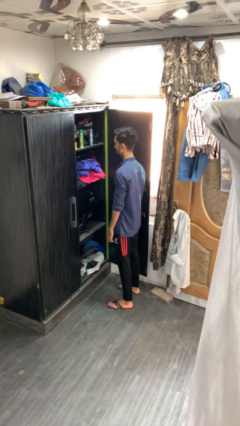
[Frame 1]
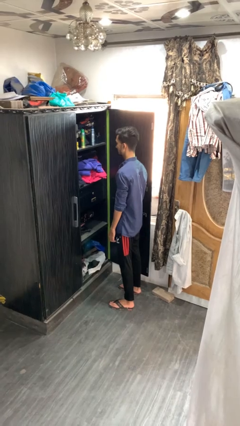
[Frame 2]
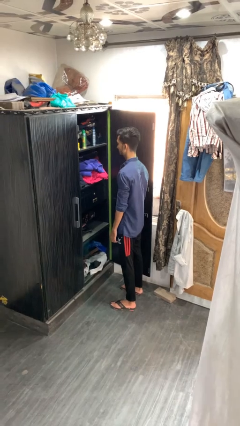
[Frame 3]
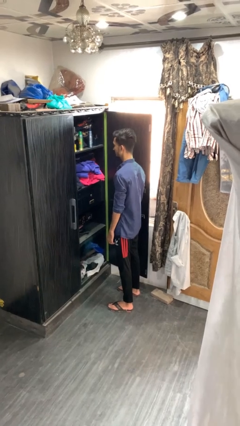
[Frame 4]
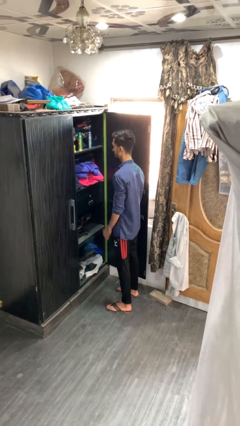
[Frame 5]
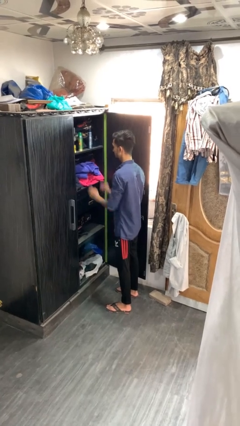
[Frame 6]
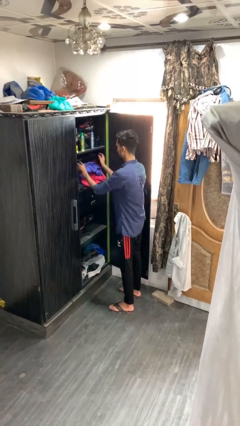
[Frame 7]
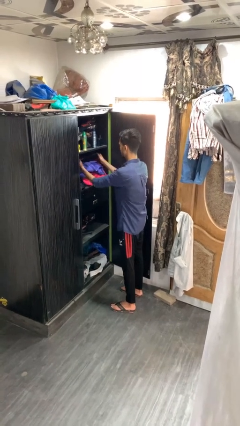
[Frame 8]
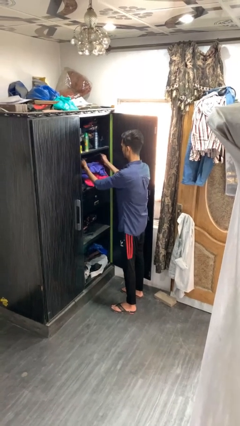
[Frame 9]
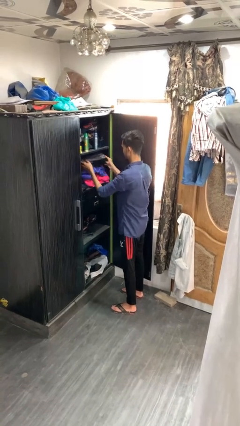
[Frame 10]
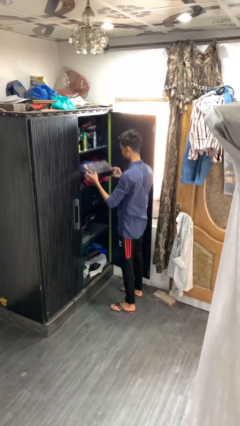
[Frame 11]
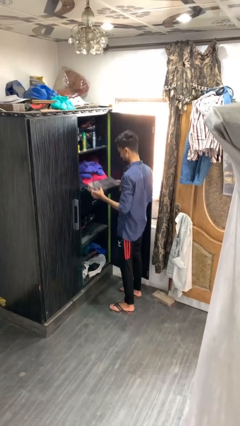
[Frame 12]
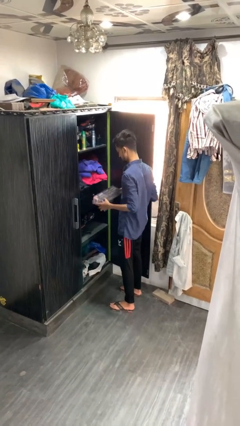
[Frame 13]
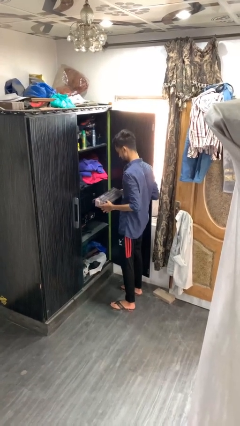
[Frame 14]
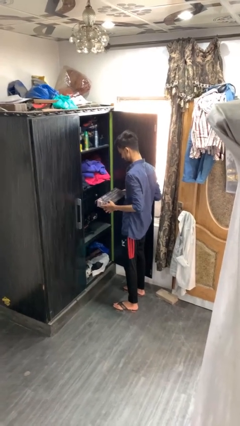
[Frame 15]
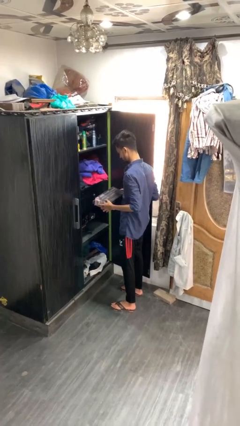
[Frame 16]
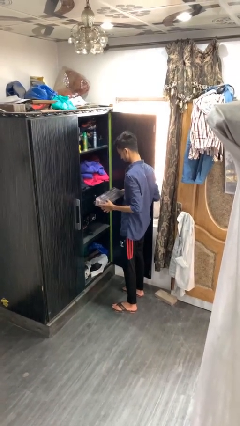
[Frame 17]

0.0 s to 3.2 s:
person picks up object from cabinet

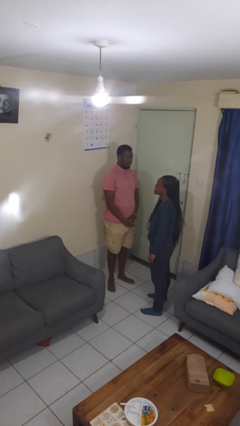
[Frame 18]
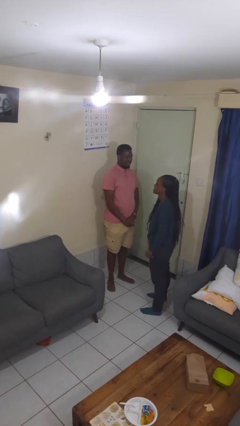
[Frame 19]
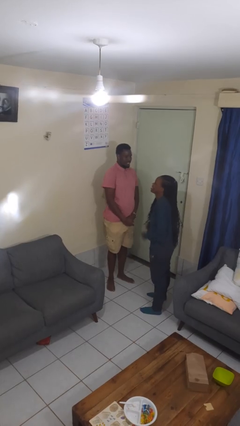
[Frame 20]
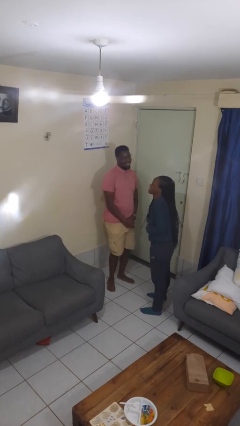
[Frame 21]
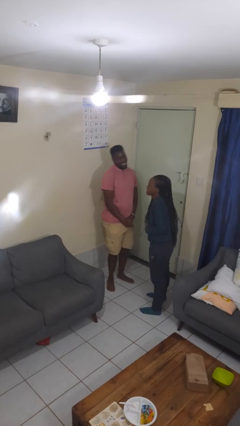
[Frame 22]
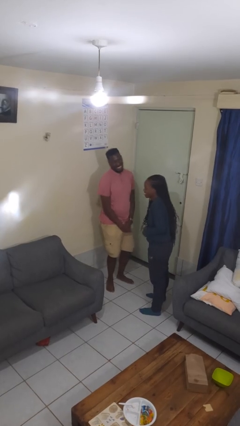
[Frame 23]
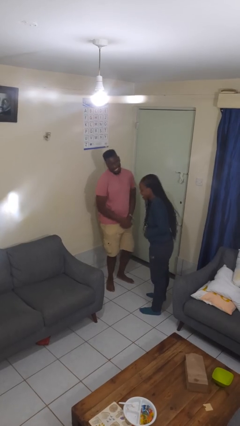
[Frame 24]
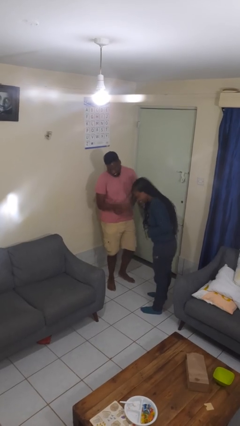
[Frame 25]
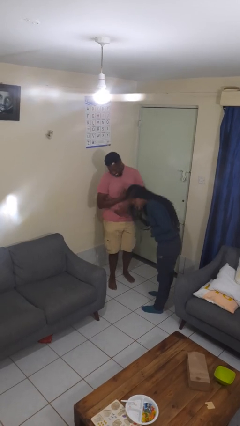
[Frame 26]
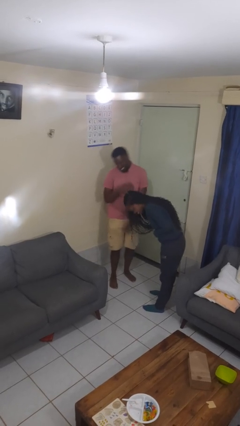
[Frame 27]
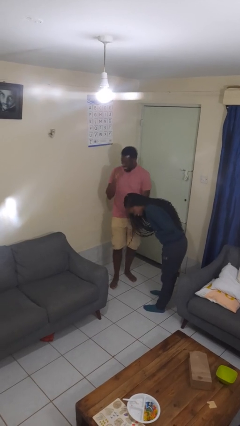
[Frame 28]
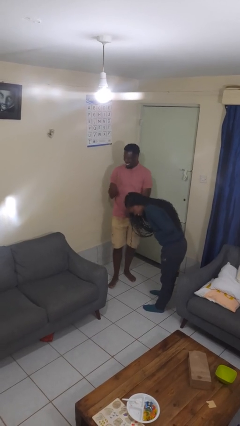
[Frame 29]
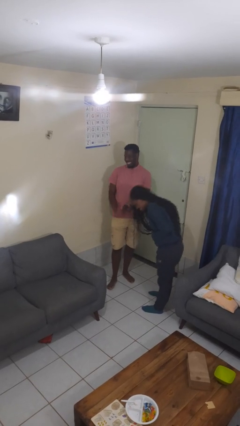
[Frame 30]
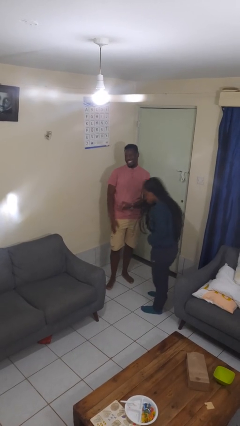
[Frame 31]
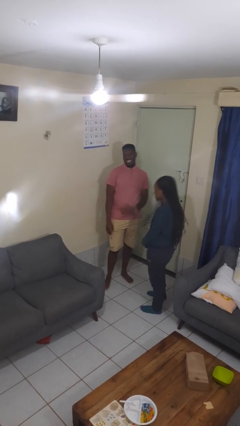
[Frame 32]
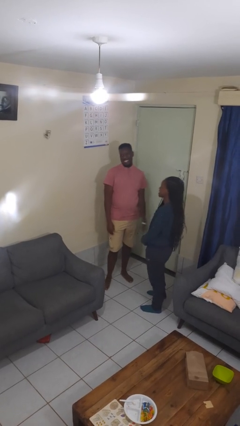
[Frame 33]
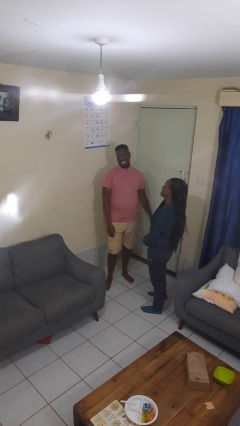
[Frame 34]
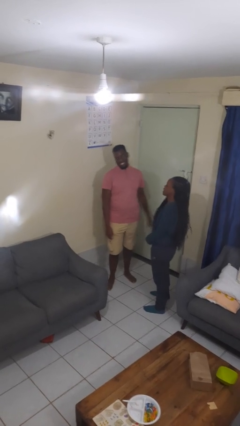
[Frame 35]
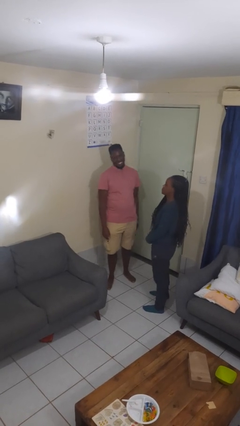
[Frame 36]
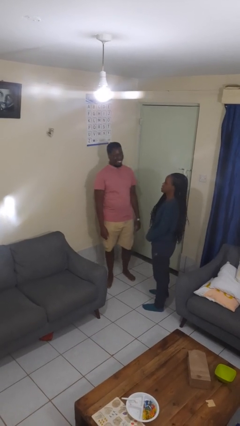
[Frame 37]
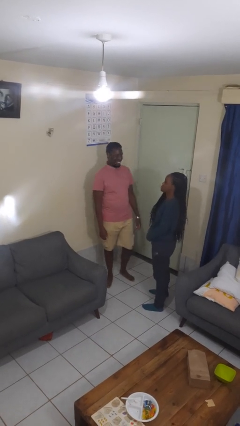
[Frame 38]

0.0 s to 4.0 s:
person laughs with person

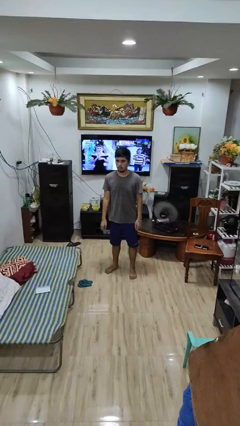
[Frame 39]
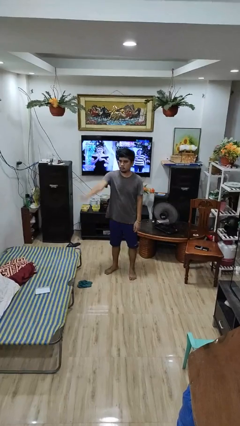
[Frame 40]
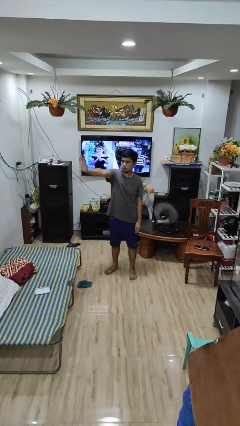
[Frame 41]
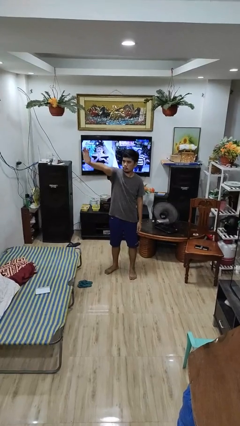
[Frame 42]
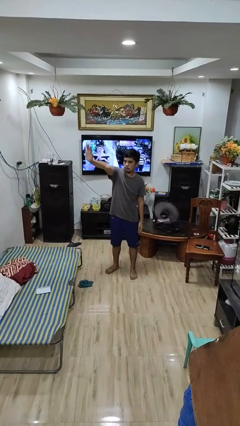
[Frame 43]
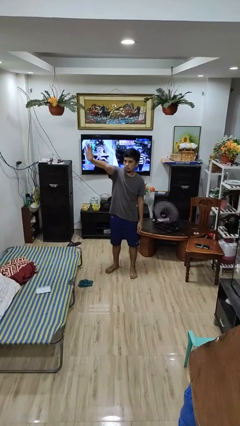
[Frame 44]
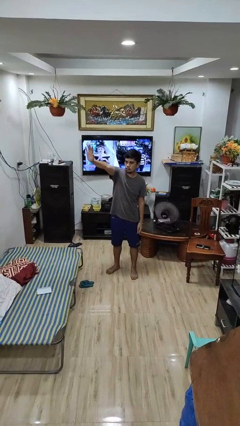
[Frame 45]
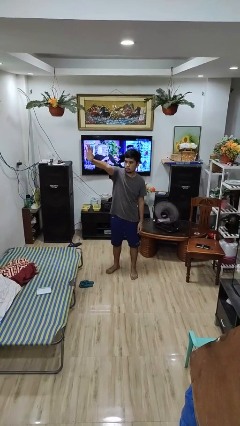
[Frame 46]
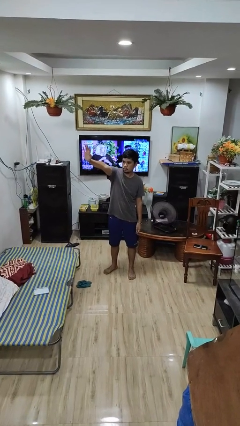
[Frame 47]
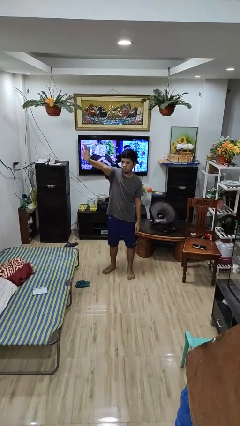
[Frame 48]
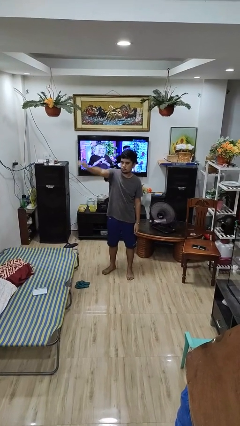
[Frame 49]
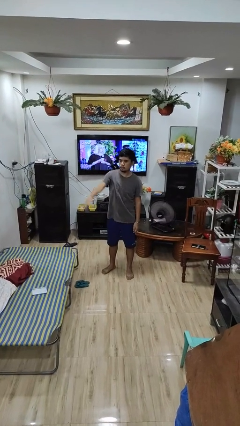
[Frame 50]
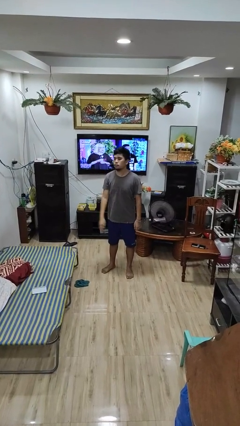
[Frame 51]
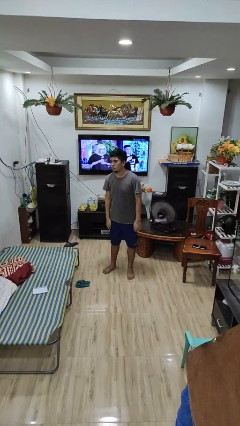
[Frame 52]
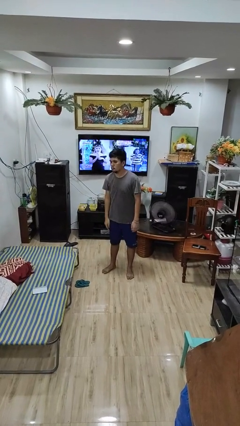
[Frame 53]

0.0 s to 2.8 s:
person gestures stop

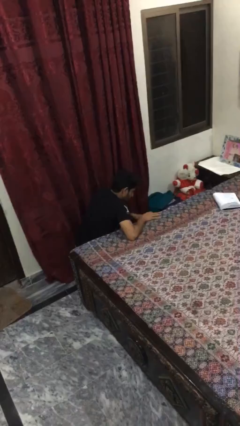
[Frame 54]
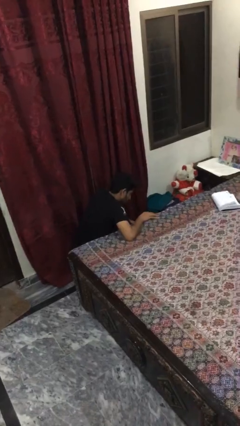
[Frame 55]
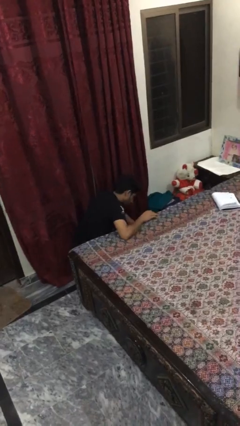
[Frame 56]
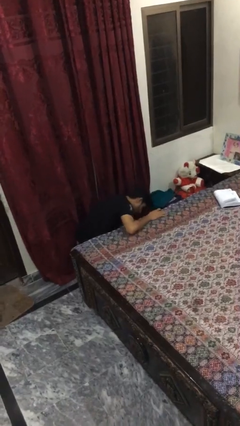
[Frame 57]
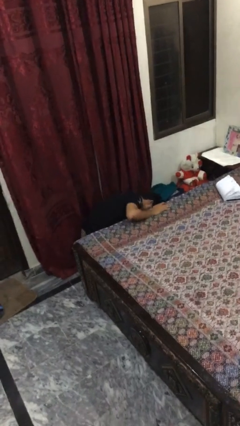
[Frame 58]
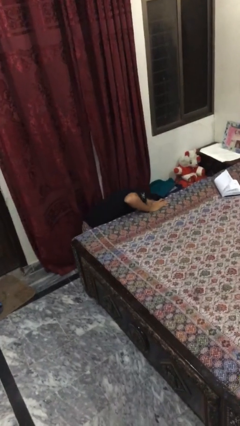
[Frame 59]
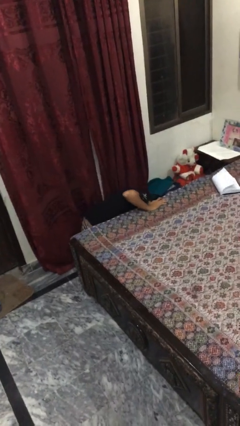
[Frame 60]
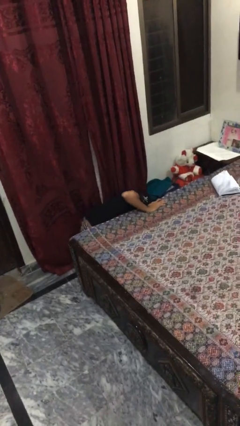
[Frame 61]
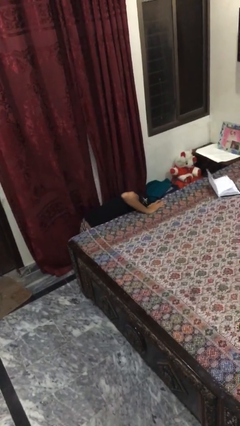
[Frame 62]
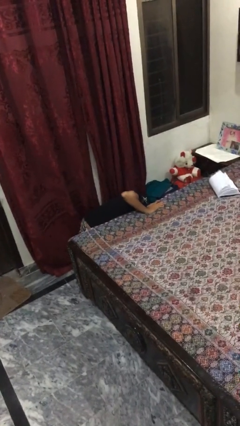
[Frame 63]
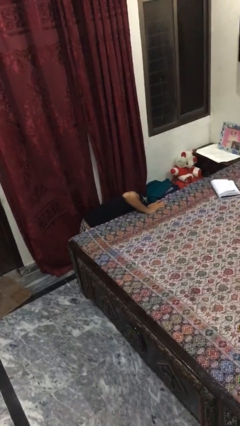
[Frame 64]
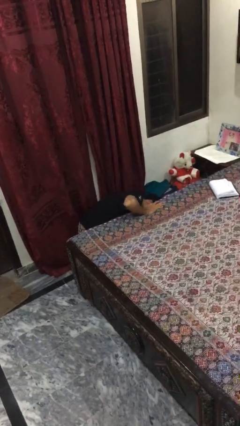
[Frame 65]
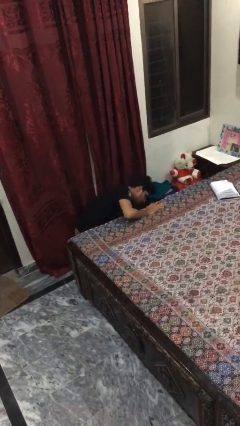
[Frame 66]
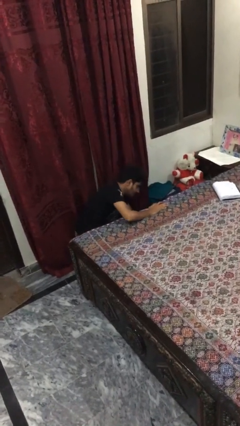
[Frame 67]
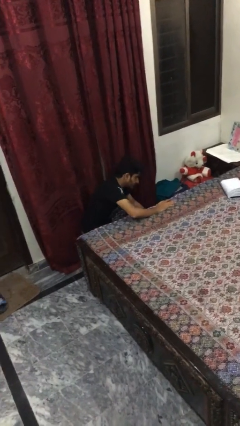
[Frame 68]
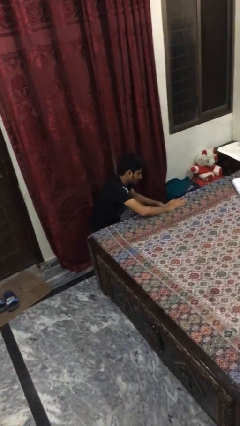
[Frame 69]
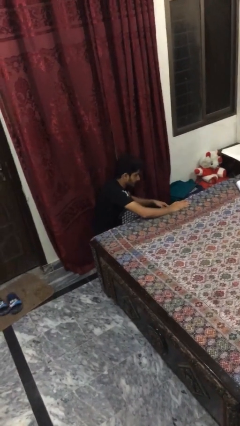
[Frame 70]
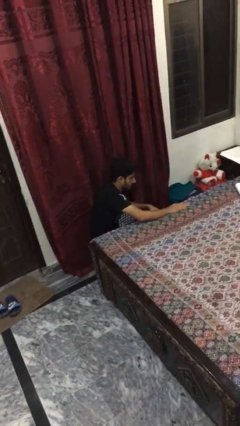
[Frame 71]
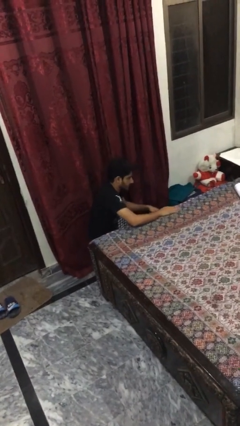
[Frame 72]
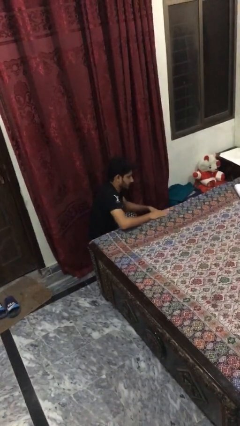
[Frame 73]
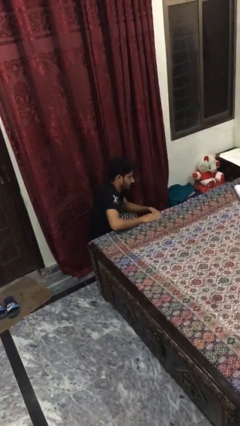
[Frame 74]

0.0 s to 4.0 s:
person searches under bed

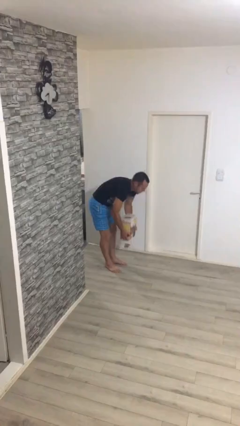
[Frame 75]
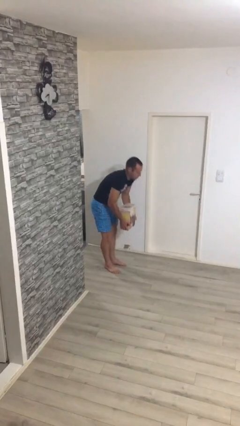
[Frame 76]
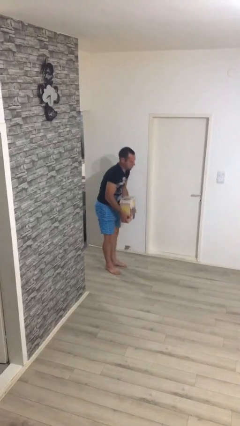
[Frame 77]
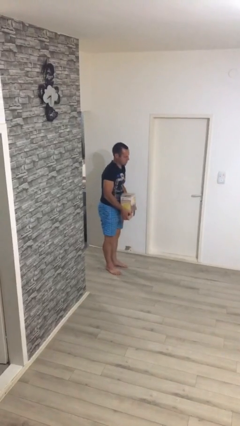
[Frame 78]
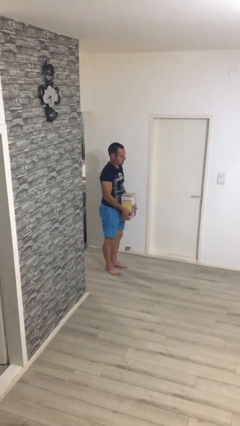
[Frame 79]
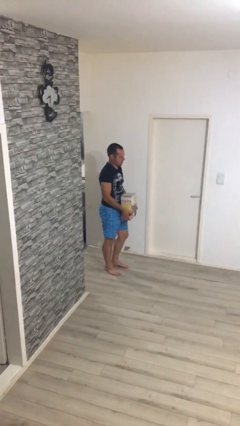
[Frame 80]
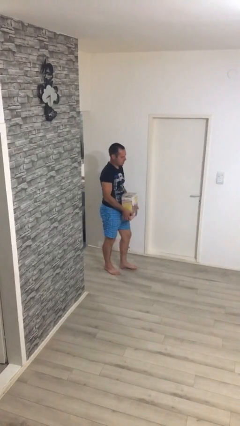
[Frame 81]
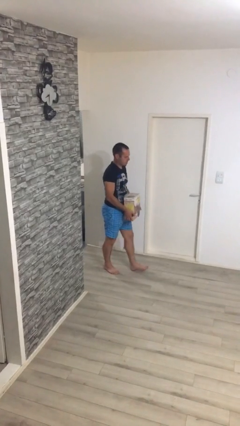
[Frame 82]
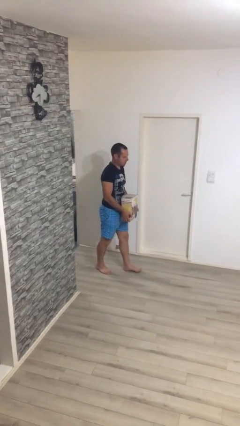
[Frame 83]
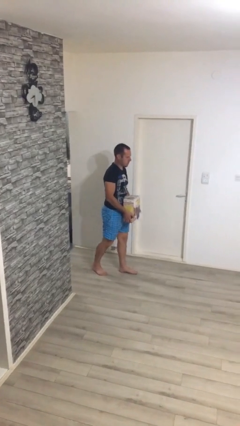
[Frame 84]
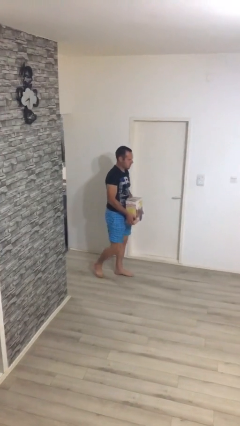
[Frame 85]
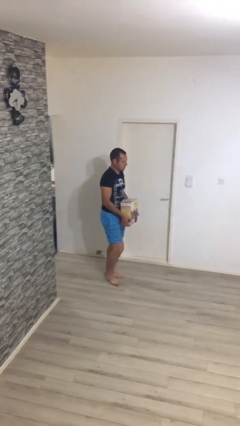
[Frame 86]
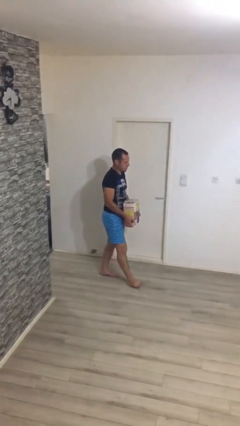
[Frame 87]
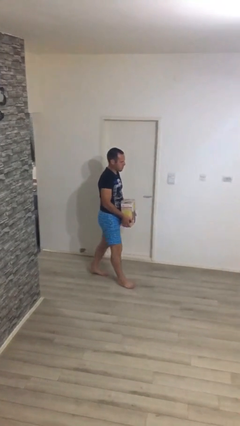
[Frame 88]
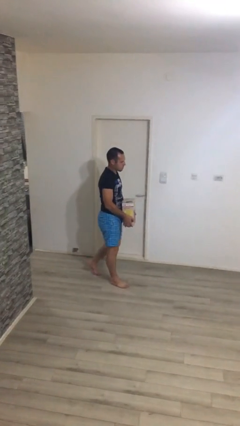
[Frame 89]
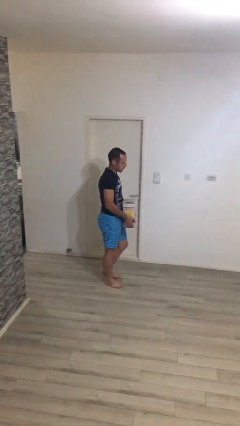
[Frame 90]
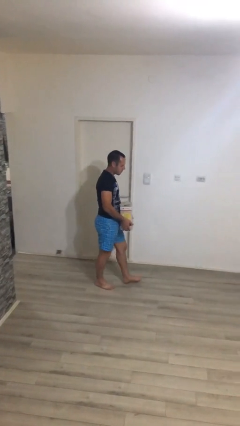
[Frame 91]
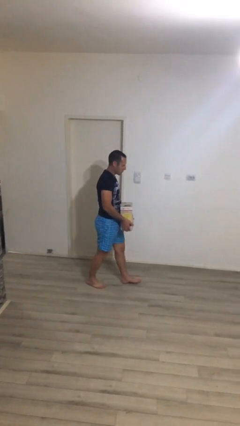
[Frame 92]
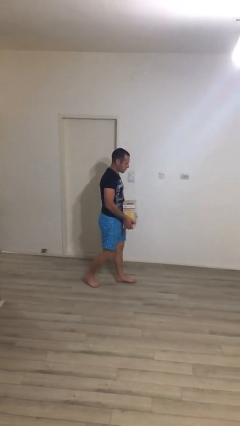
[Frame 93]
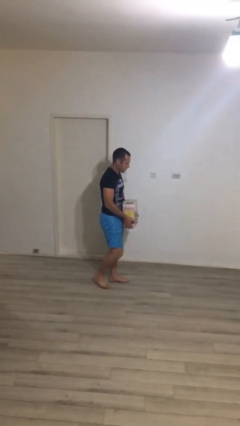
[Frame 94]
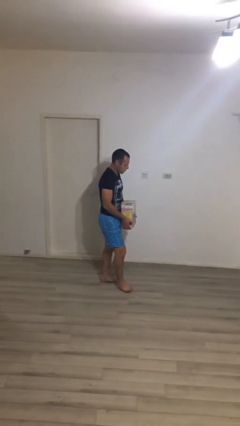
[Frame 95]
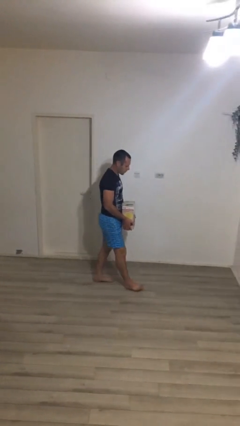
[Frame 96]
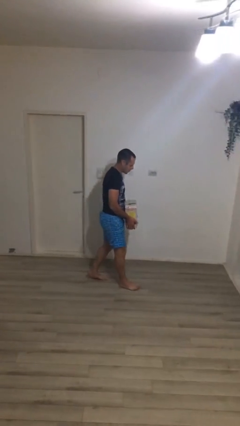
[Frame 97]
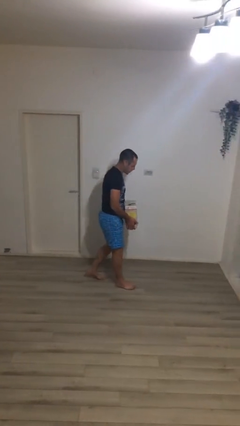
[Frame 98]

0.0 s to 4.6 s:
person carries heavy object
